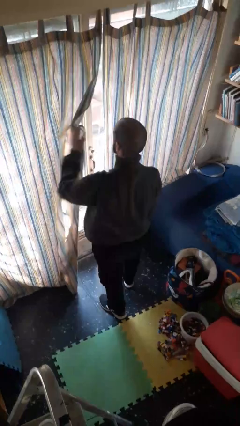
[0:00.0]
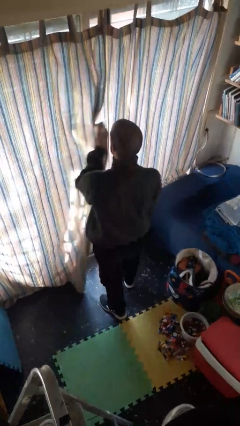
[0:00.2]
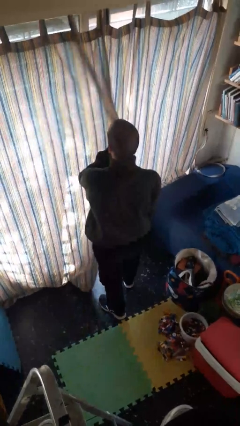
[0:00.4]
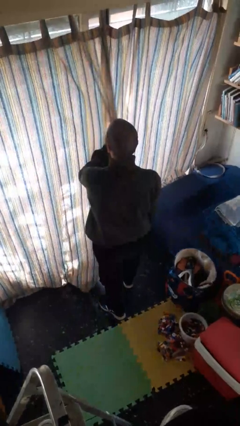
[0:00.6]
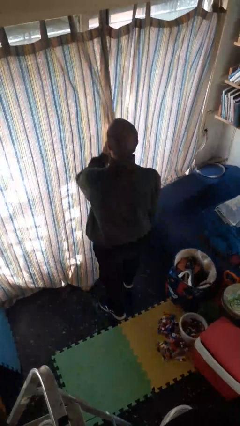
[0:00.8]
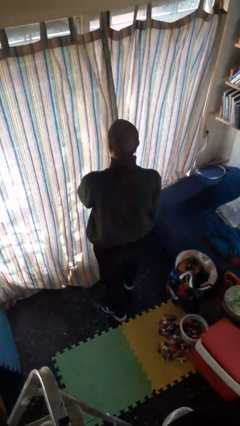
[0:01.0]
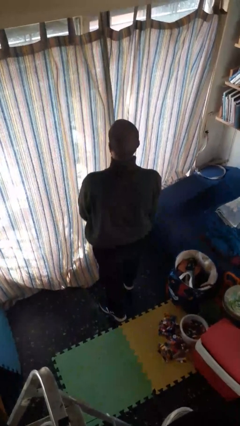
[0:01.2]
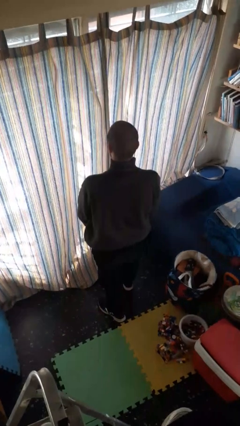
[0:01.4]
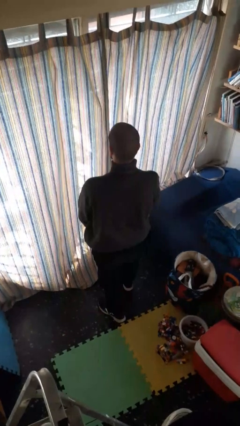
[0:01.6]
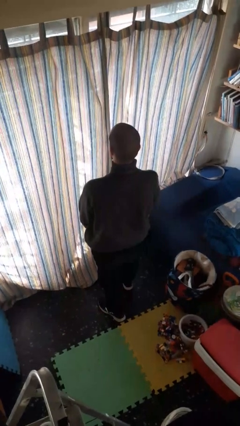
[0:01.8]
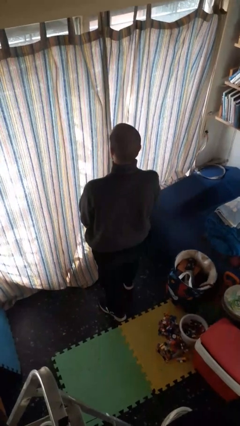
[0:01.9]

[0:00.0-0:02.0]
person closes curtains

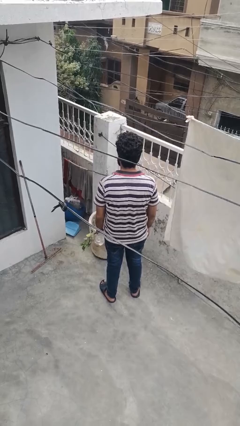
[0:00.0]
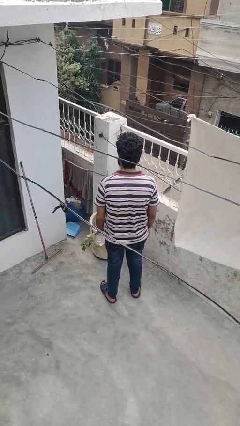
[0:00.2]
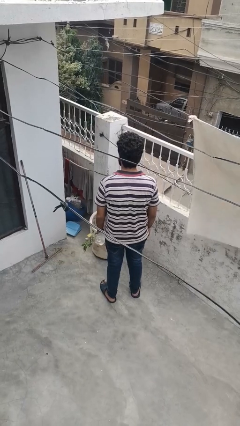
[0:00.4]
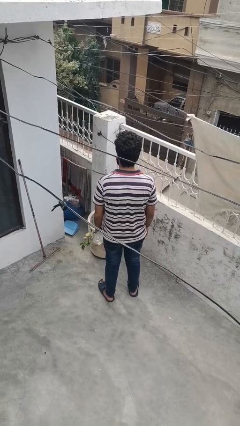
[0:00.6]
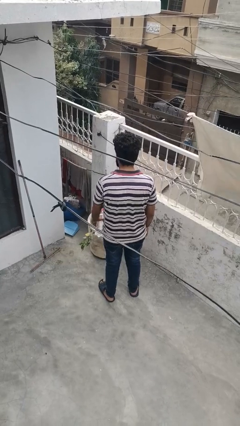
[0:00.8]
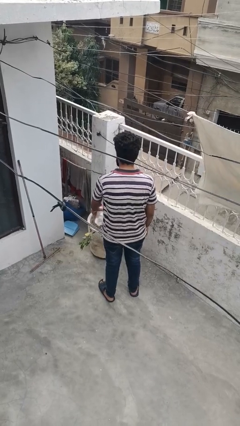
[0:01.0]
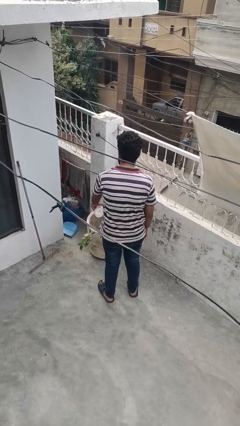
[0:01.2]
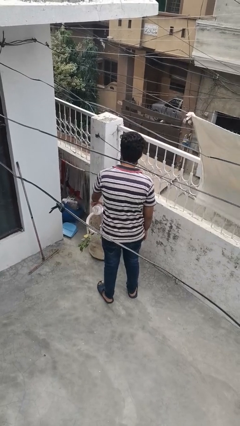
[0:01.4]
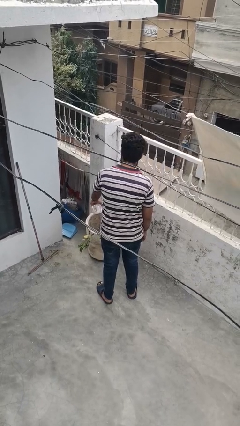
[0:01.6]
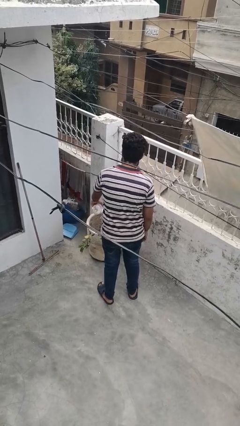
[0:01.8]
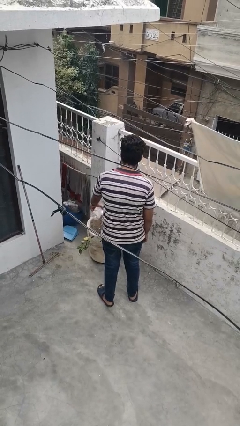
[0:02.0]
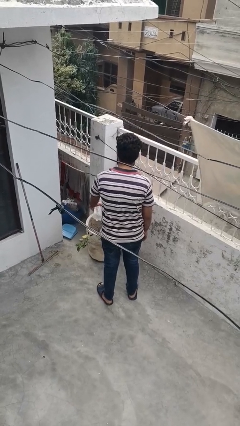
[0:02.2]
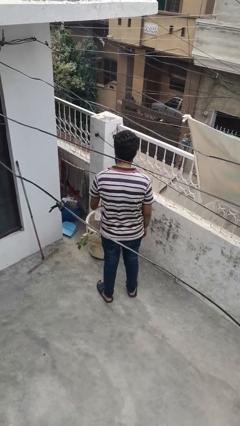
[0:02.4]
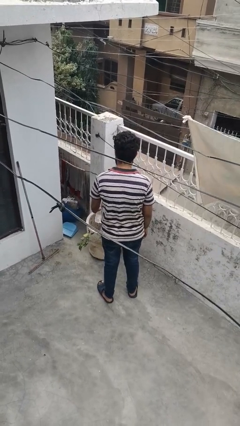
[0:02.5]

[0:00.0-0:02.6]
person waters houseplant

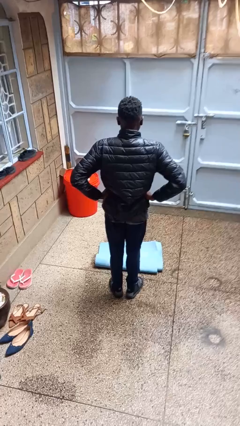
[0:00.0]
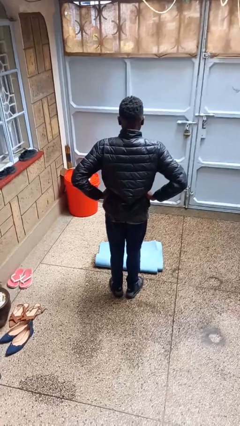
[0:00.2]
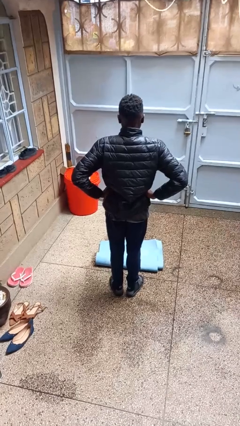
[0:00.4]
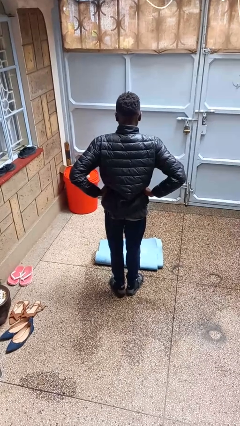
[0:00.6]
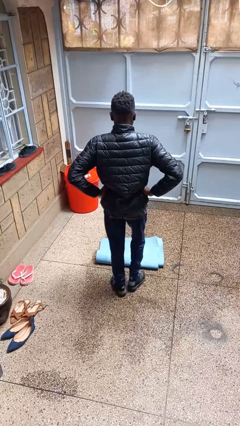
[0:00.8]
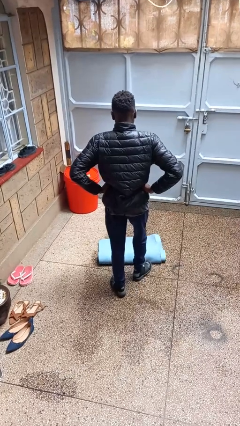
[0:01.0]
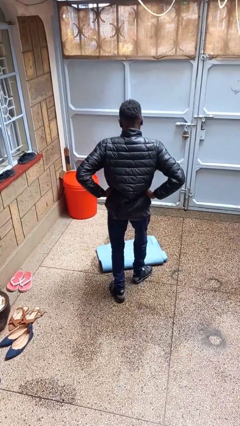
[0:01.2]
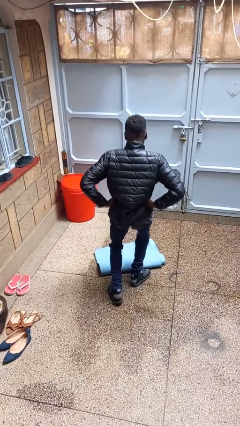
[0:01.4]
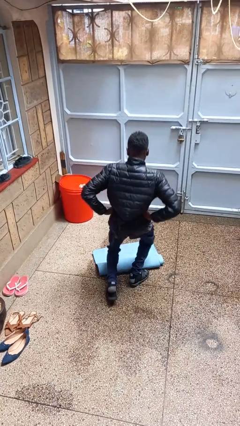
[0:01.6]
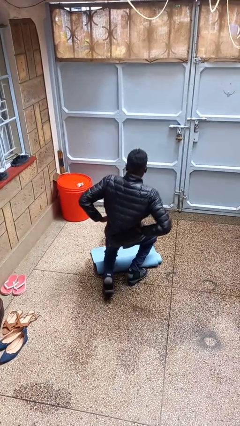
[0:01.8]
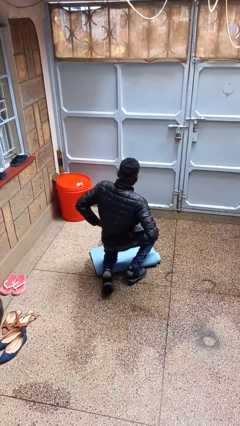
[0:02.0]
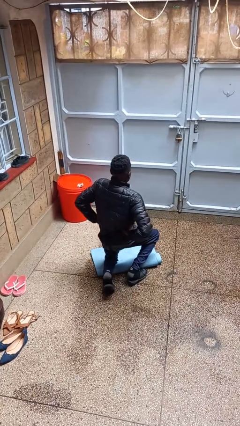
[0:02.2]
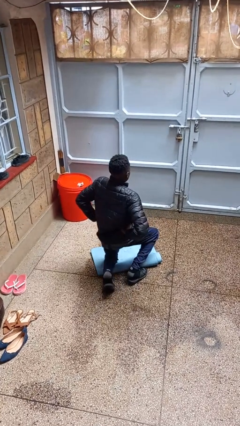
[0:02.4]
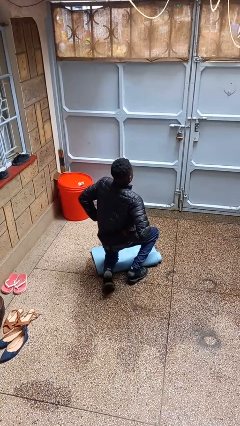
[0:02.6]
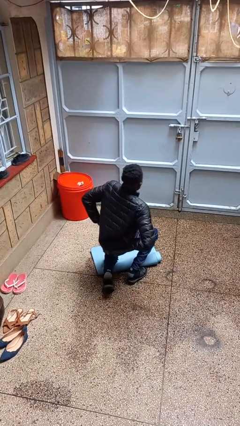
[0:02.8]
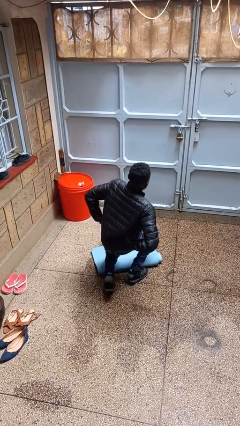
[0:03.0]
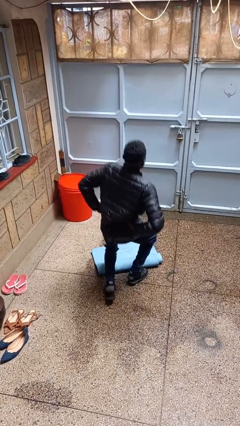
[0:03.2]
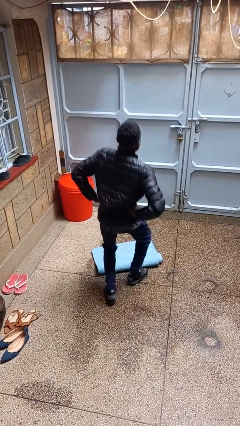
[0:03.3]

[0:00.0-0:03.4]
person exercises with lunges

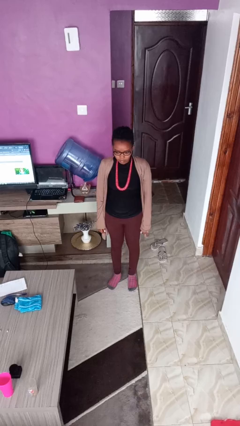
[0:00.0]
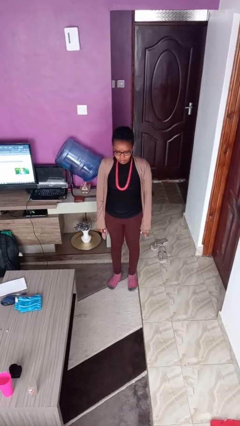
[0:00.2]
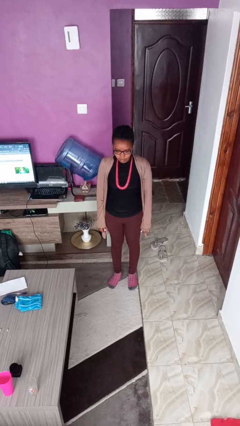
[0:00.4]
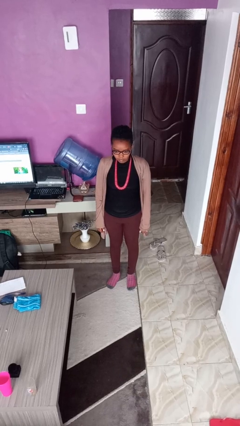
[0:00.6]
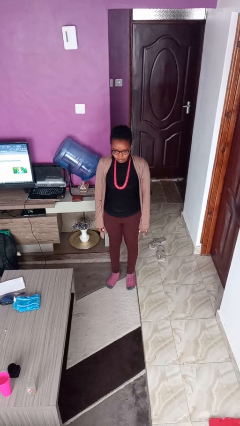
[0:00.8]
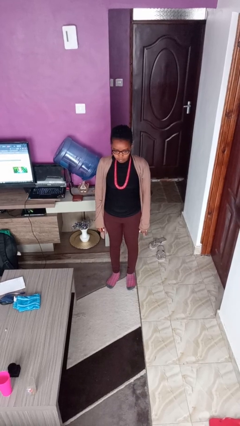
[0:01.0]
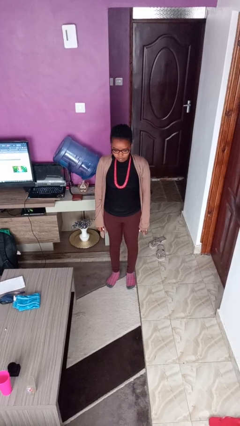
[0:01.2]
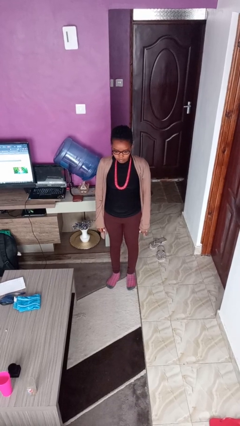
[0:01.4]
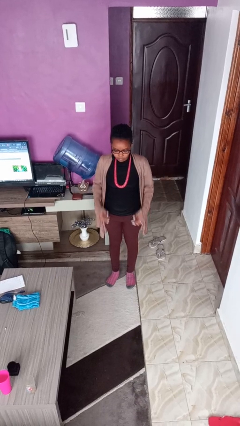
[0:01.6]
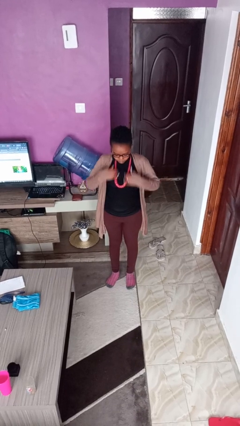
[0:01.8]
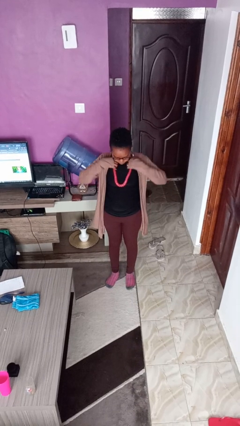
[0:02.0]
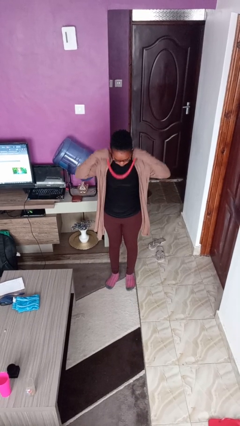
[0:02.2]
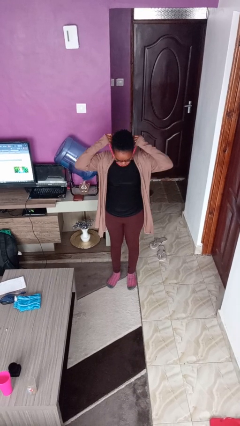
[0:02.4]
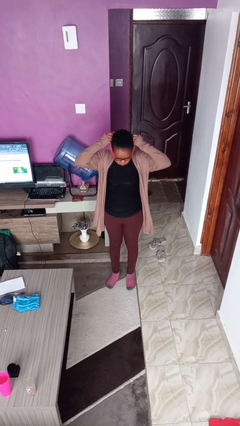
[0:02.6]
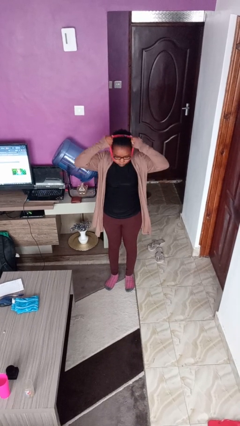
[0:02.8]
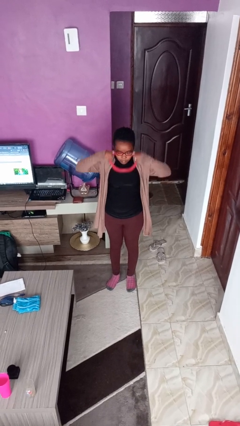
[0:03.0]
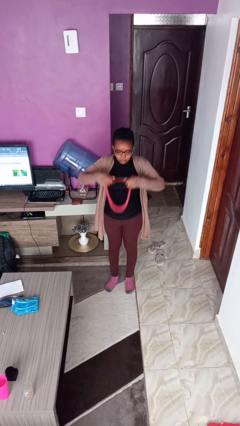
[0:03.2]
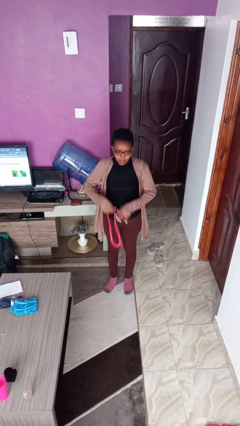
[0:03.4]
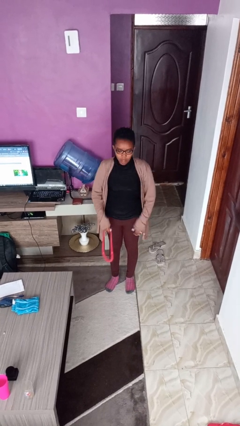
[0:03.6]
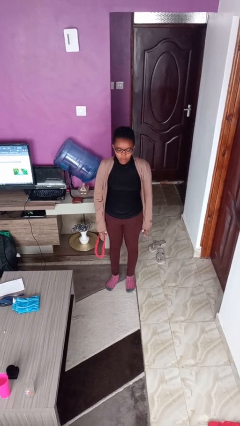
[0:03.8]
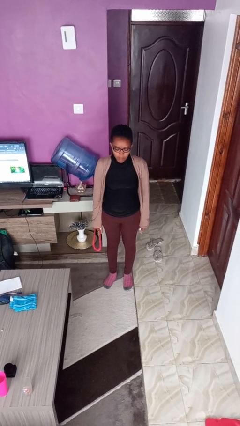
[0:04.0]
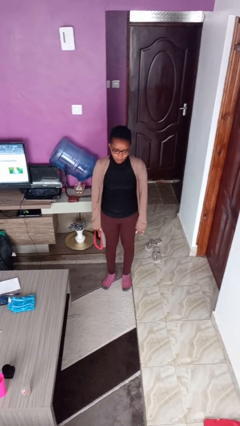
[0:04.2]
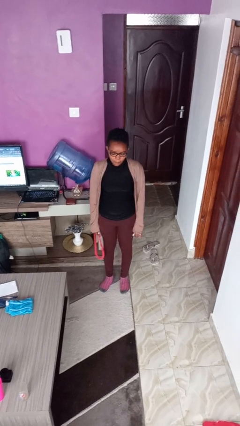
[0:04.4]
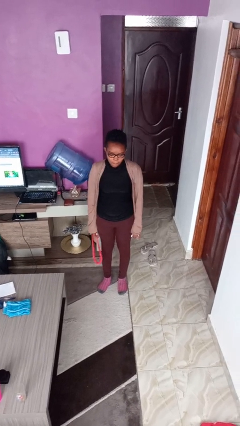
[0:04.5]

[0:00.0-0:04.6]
person takes off necklace

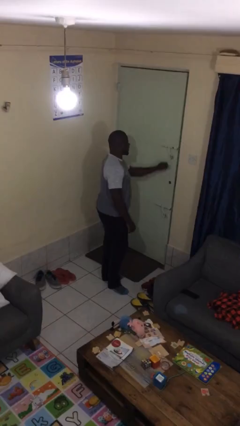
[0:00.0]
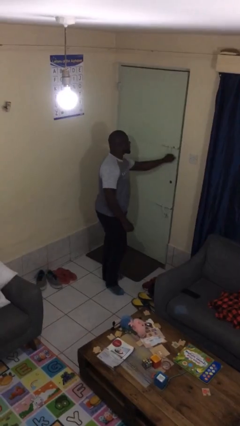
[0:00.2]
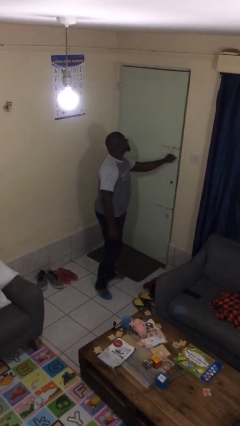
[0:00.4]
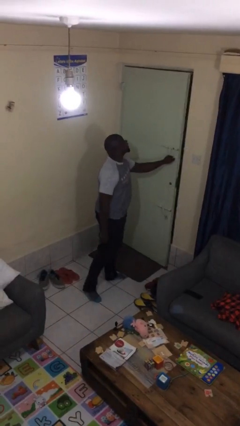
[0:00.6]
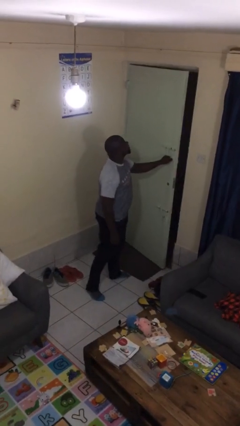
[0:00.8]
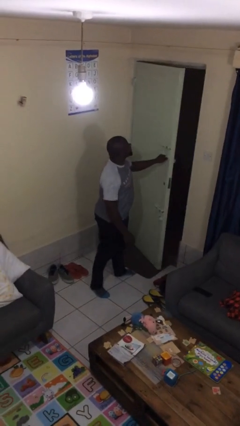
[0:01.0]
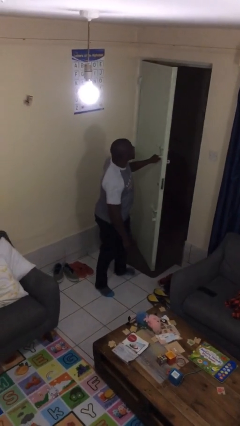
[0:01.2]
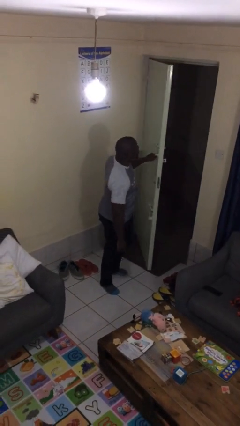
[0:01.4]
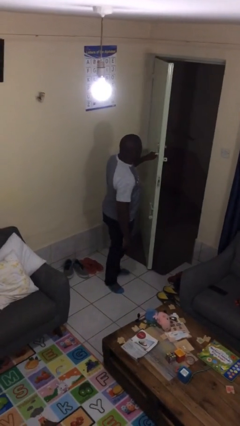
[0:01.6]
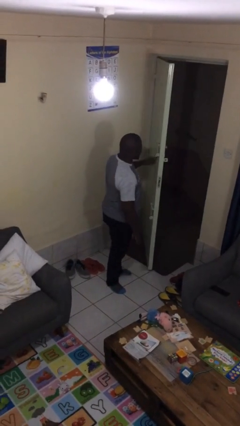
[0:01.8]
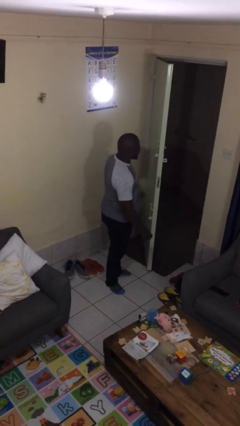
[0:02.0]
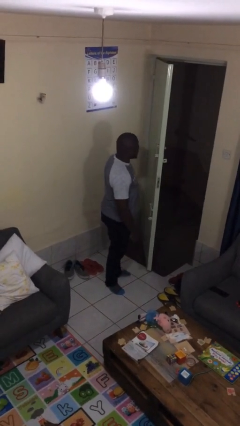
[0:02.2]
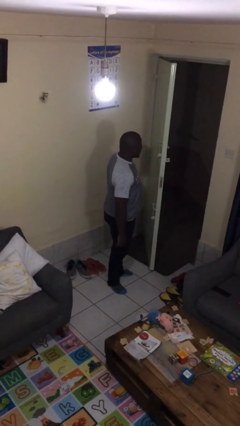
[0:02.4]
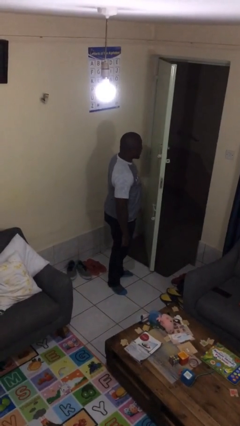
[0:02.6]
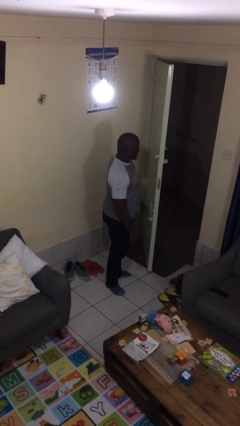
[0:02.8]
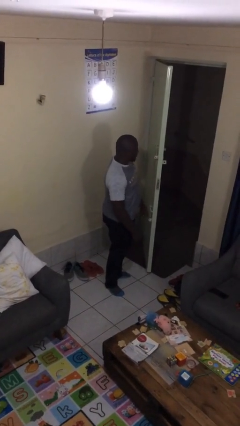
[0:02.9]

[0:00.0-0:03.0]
person opens facility door

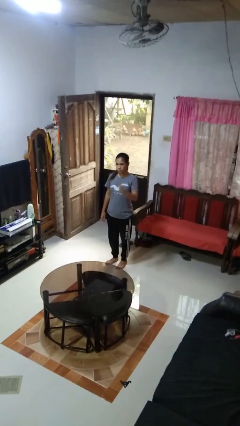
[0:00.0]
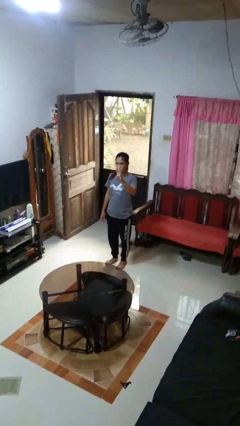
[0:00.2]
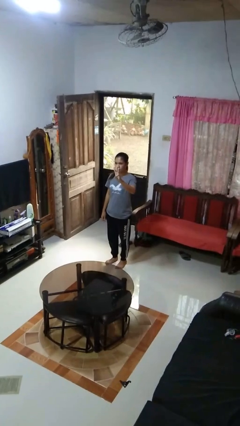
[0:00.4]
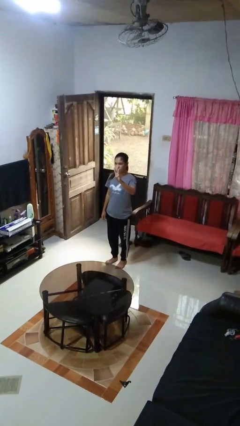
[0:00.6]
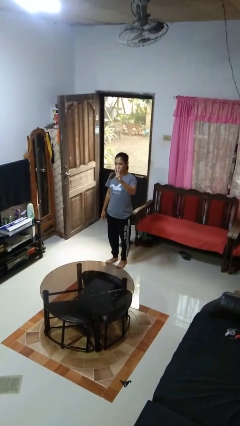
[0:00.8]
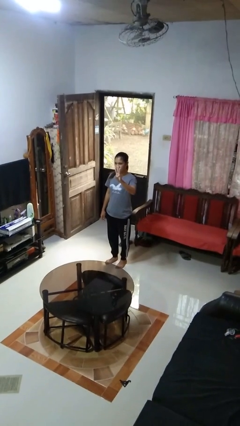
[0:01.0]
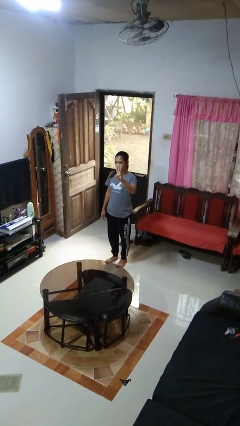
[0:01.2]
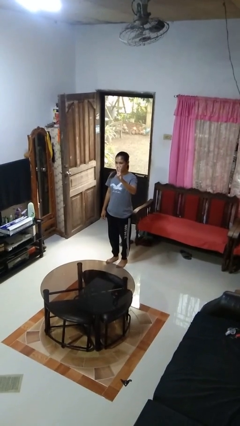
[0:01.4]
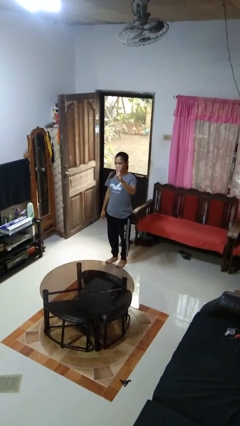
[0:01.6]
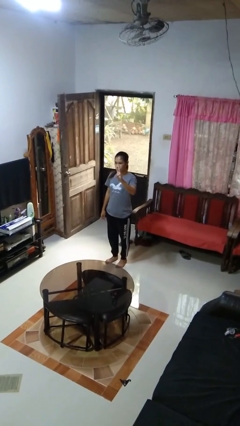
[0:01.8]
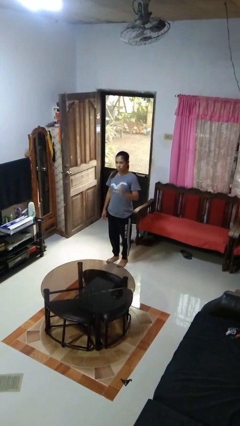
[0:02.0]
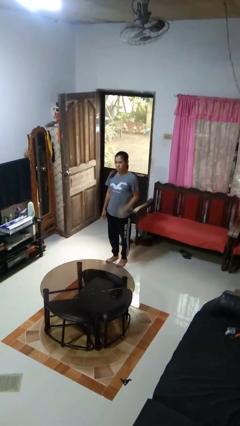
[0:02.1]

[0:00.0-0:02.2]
person gestures number three
